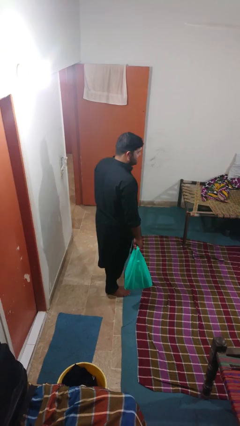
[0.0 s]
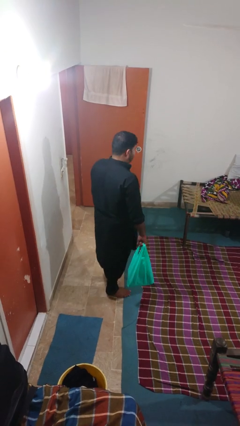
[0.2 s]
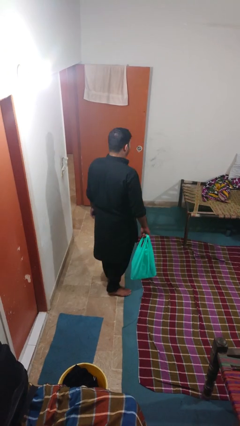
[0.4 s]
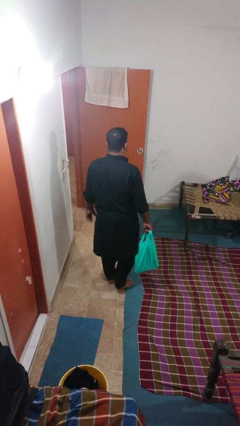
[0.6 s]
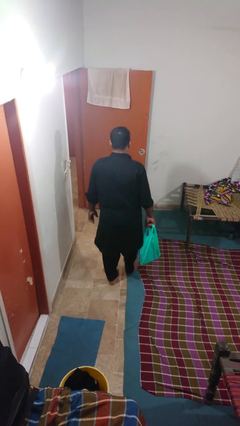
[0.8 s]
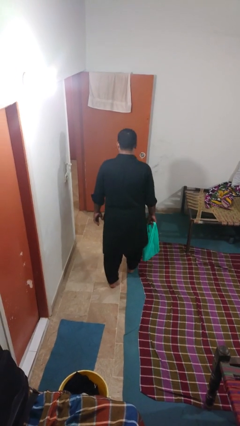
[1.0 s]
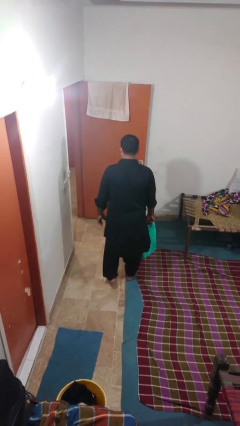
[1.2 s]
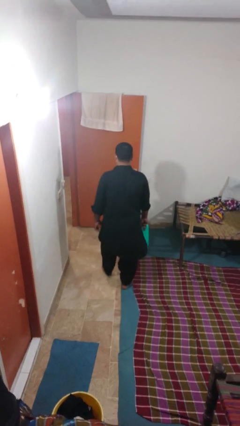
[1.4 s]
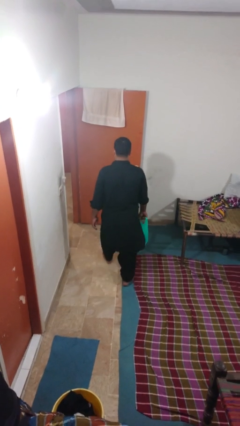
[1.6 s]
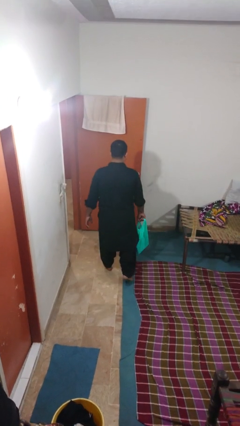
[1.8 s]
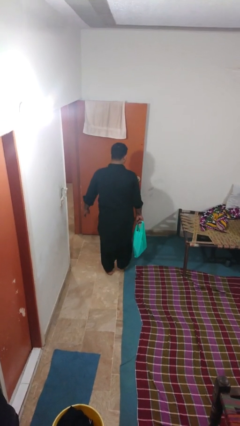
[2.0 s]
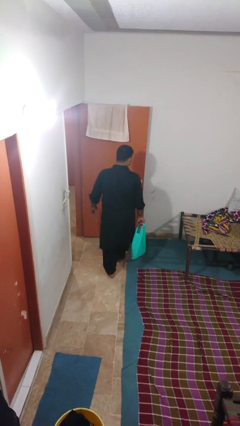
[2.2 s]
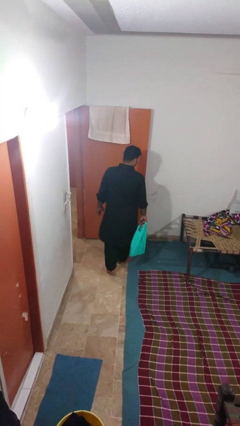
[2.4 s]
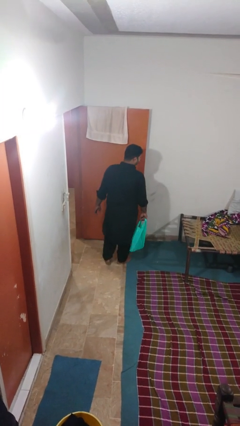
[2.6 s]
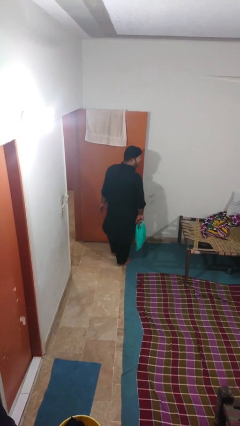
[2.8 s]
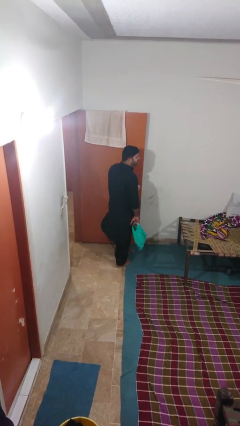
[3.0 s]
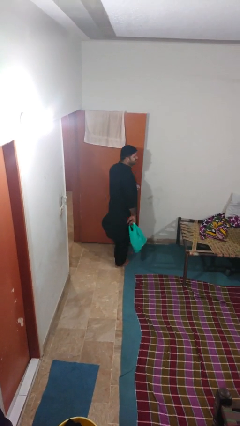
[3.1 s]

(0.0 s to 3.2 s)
person carries groceries

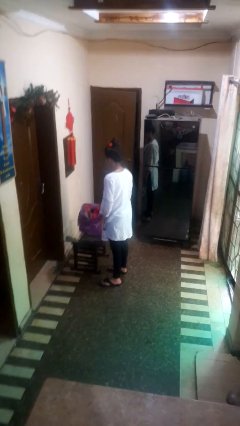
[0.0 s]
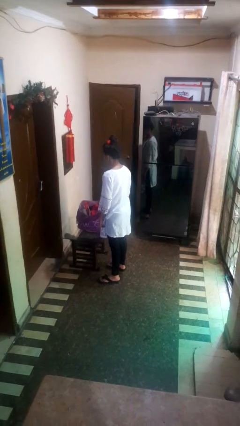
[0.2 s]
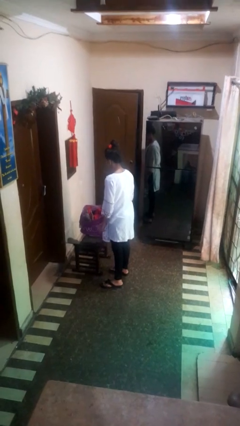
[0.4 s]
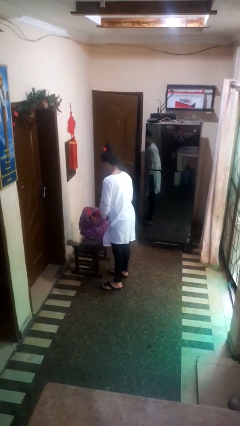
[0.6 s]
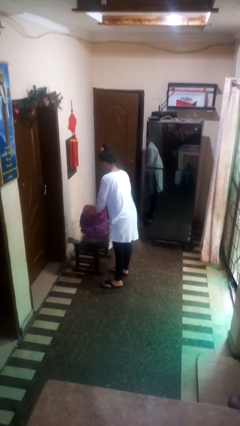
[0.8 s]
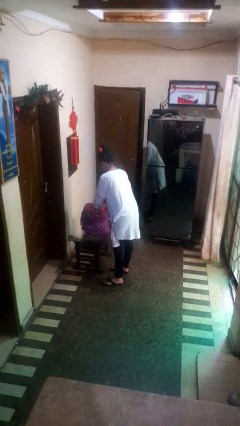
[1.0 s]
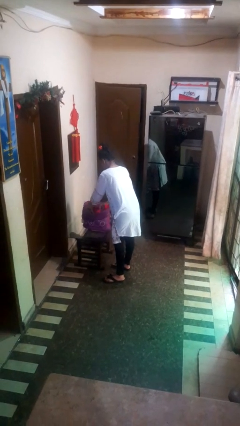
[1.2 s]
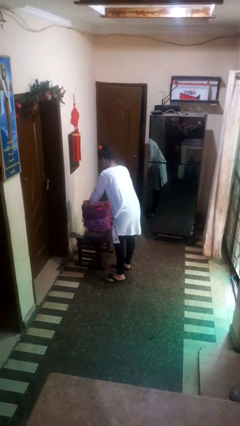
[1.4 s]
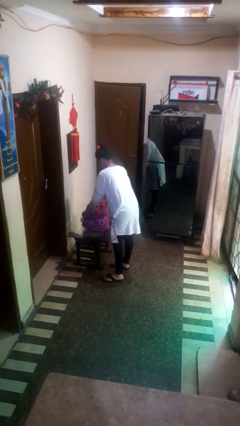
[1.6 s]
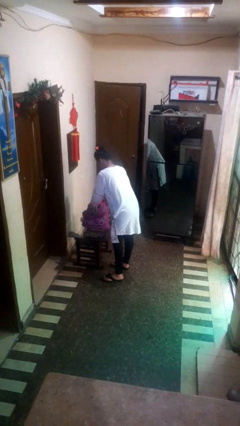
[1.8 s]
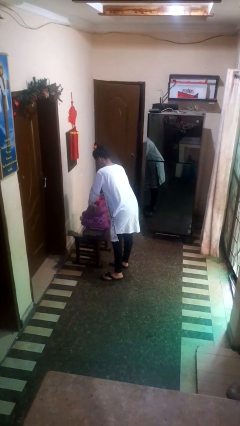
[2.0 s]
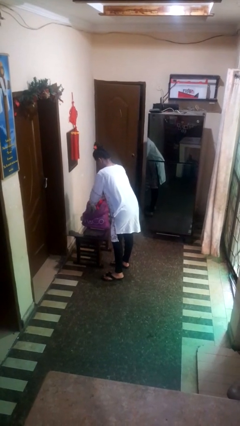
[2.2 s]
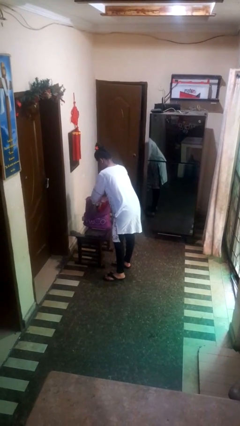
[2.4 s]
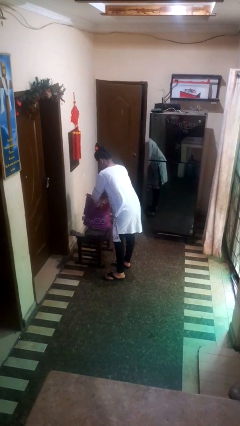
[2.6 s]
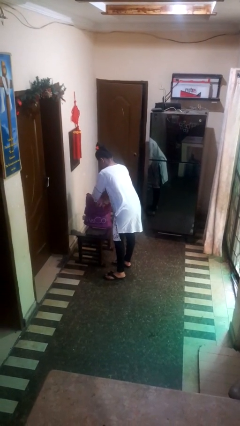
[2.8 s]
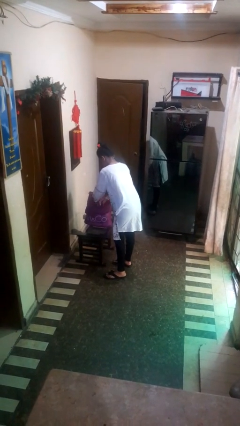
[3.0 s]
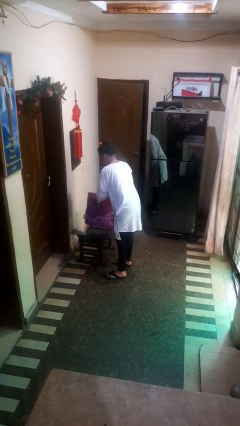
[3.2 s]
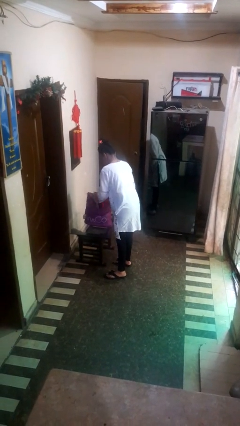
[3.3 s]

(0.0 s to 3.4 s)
person searches in bag

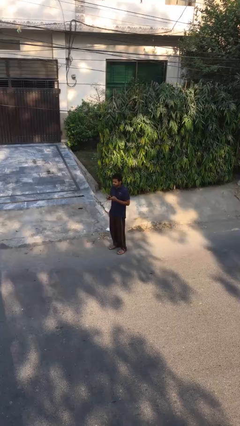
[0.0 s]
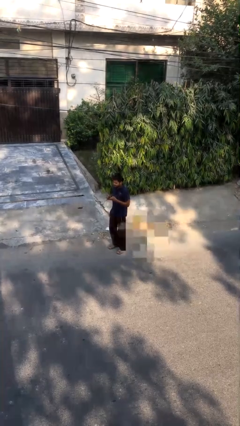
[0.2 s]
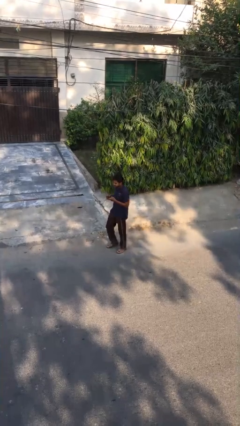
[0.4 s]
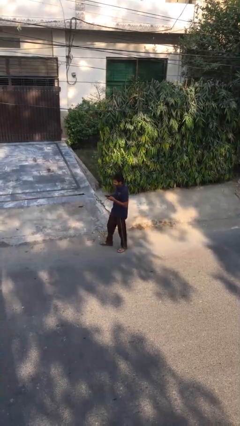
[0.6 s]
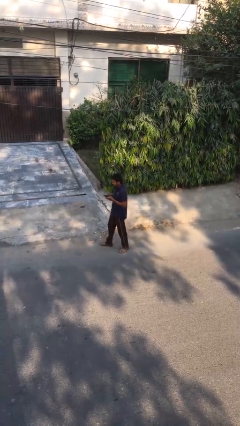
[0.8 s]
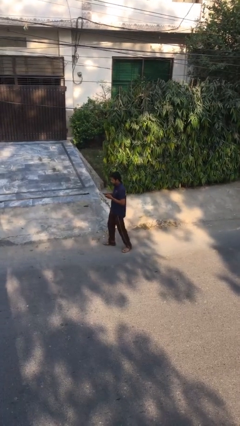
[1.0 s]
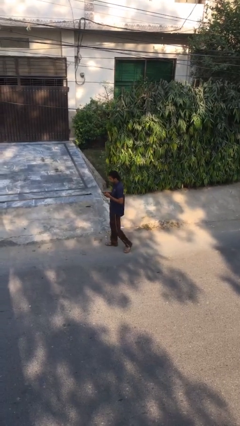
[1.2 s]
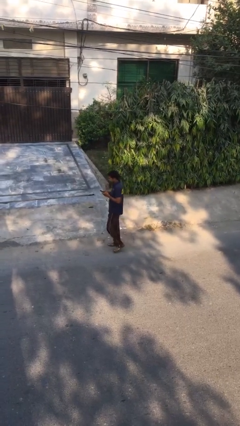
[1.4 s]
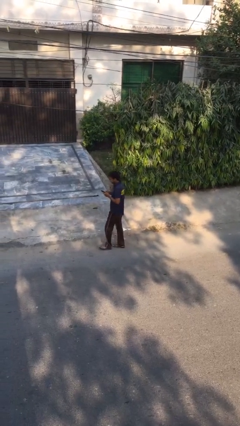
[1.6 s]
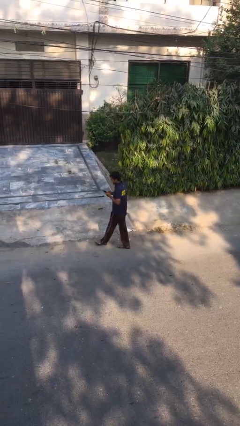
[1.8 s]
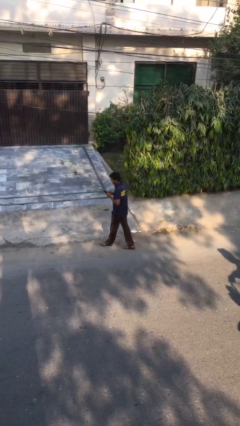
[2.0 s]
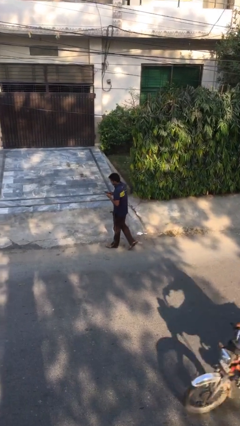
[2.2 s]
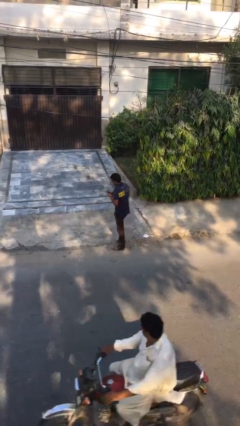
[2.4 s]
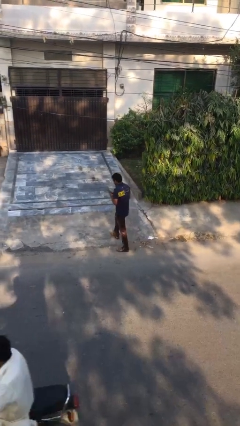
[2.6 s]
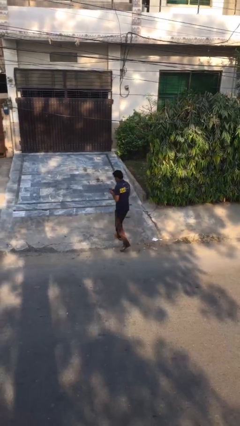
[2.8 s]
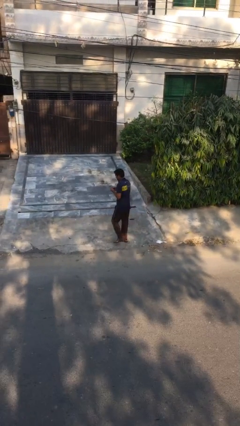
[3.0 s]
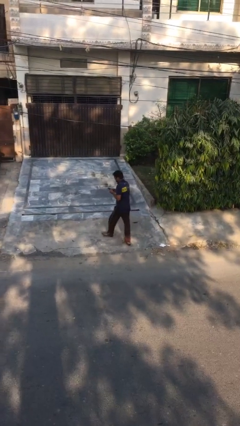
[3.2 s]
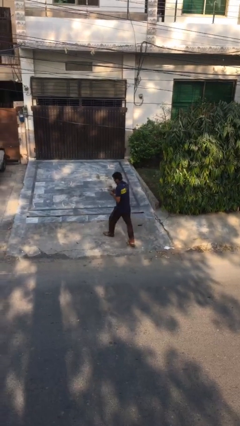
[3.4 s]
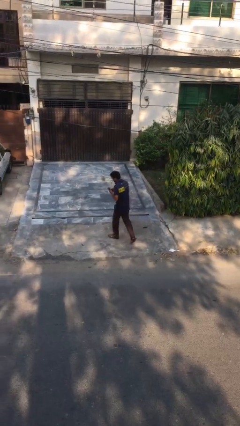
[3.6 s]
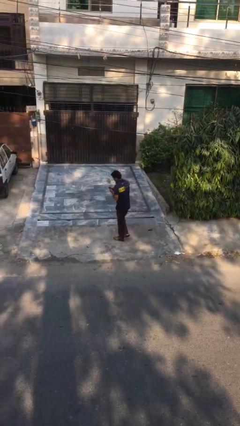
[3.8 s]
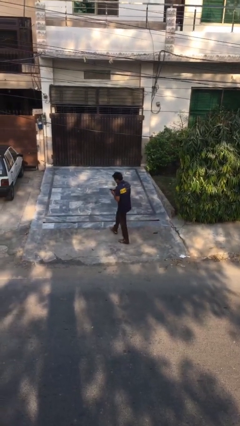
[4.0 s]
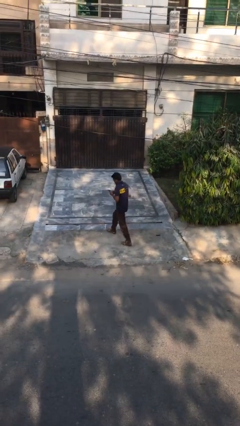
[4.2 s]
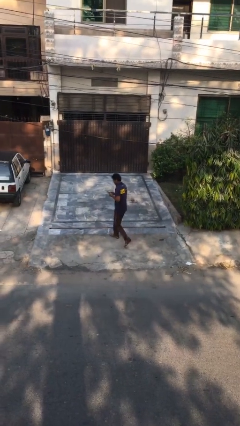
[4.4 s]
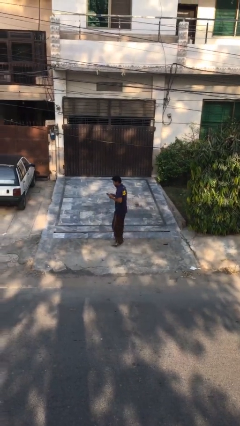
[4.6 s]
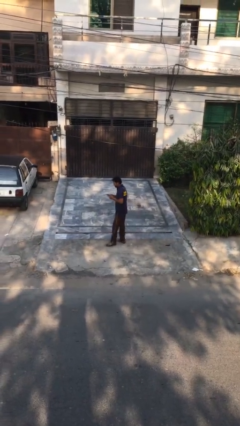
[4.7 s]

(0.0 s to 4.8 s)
person texts on phone

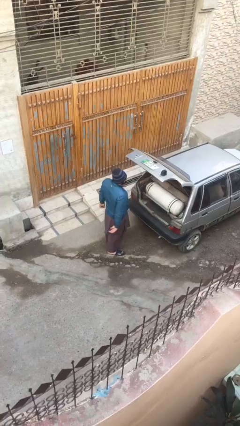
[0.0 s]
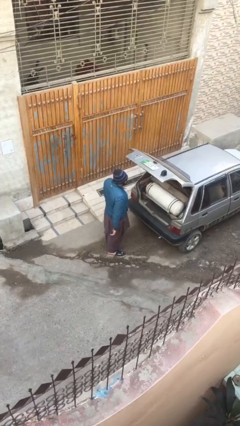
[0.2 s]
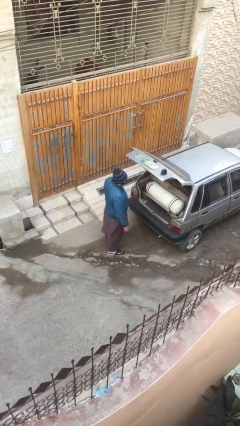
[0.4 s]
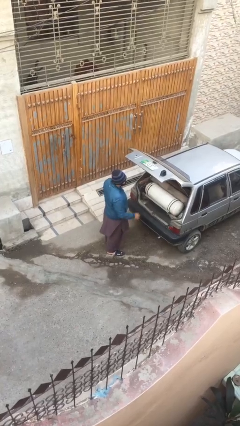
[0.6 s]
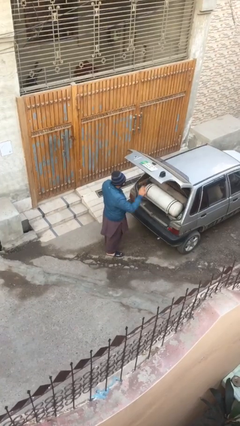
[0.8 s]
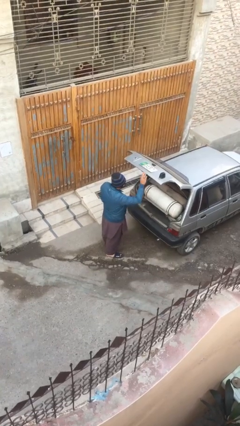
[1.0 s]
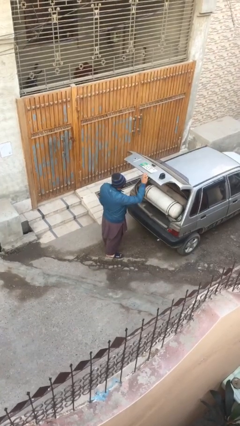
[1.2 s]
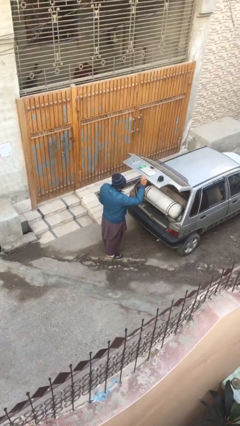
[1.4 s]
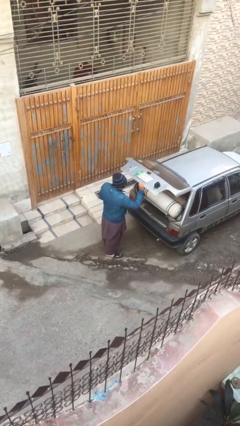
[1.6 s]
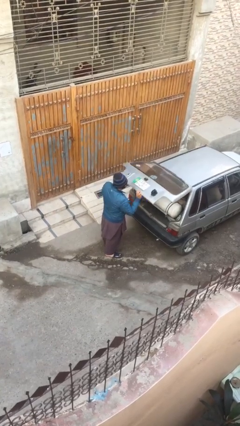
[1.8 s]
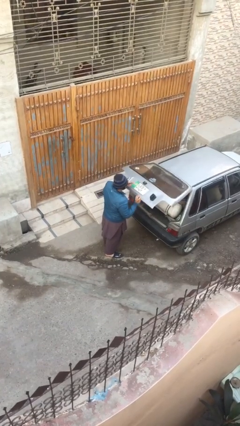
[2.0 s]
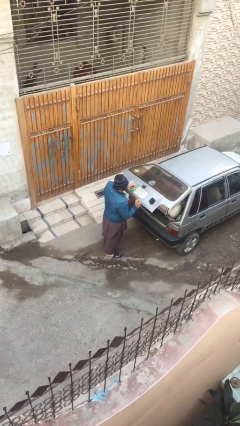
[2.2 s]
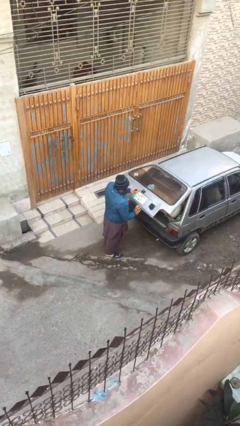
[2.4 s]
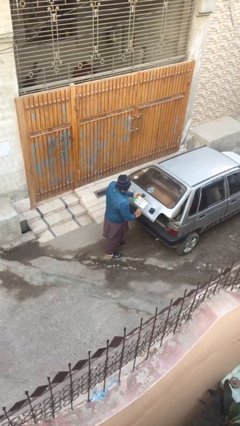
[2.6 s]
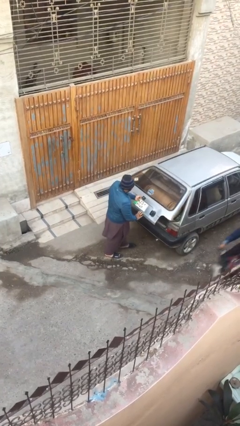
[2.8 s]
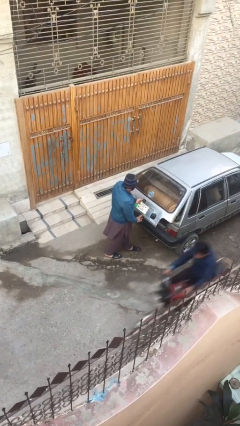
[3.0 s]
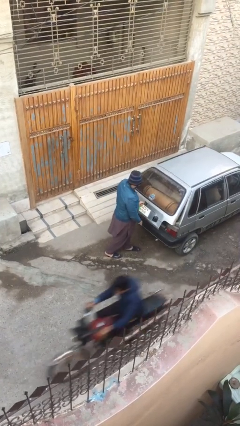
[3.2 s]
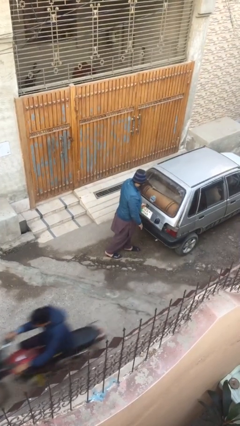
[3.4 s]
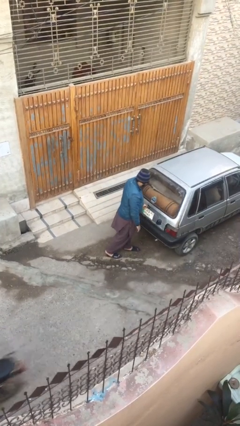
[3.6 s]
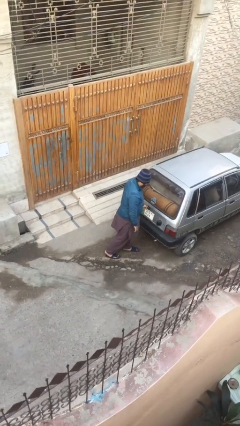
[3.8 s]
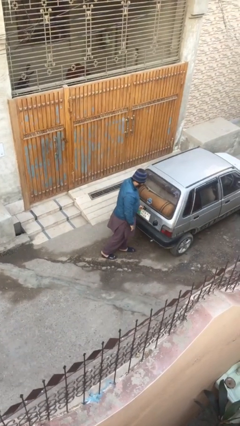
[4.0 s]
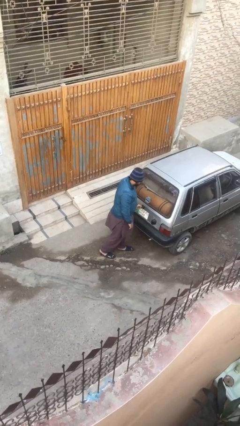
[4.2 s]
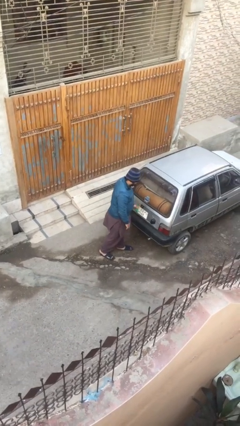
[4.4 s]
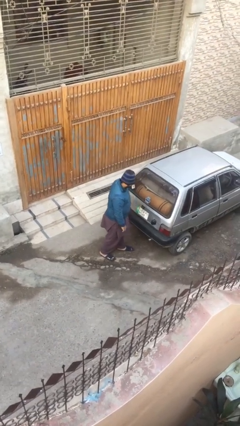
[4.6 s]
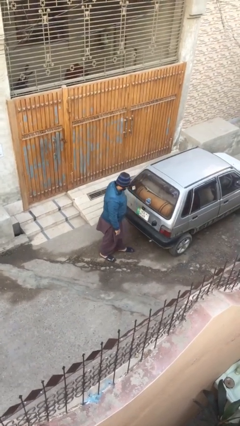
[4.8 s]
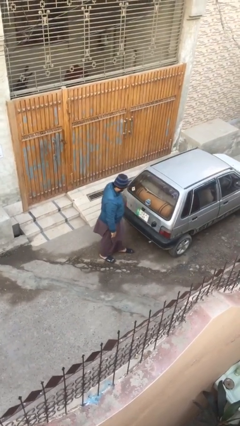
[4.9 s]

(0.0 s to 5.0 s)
person closes car trunk

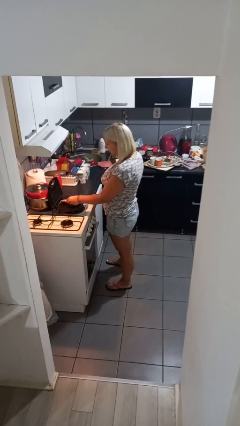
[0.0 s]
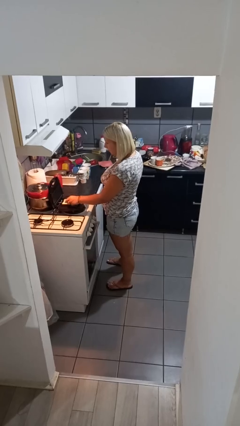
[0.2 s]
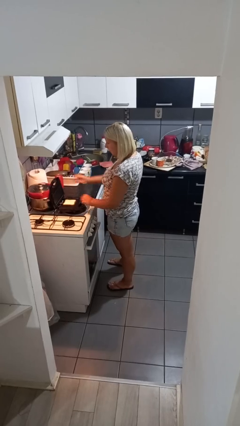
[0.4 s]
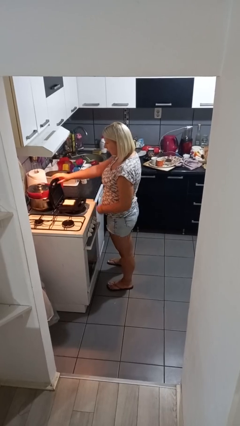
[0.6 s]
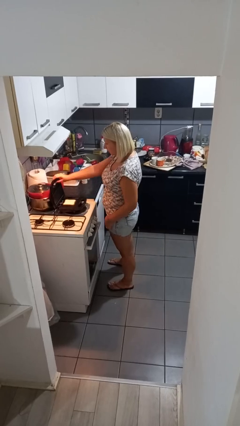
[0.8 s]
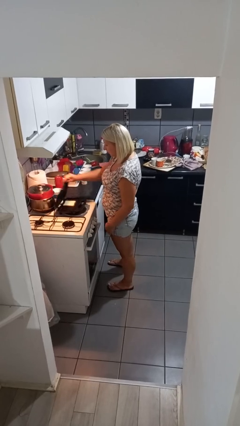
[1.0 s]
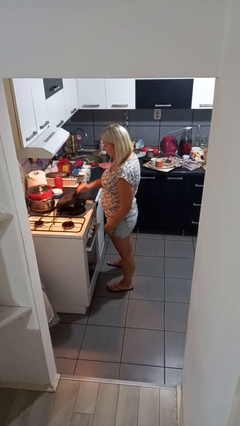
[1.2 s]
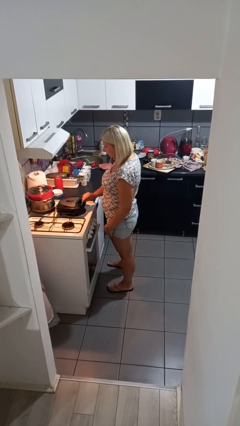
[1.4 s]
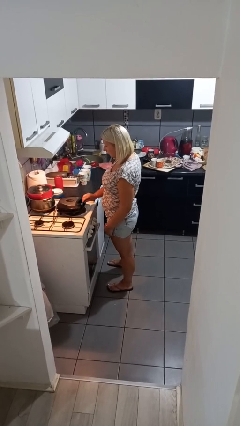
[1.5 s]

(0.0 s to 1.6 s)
person puts object into toaster
